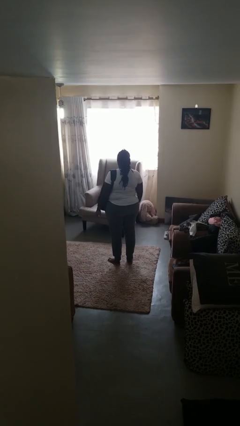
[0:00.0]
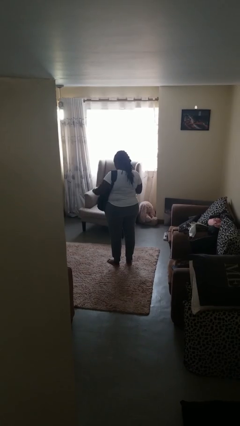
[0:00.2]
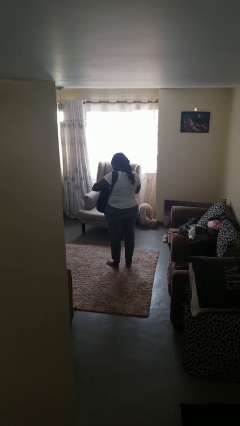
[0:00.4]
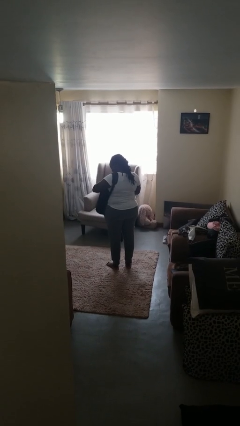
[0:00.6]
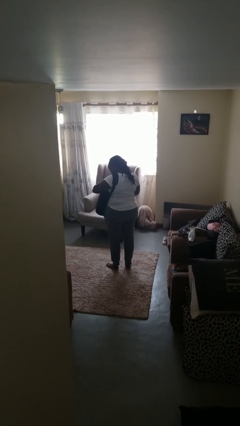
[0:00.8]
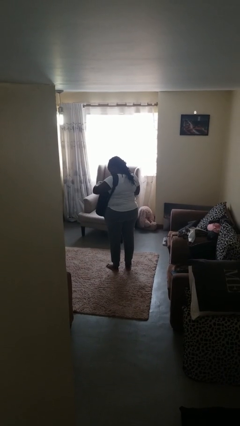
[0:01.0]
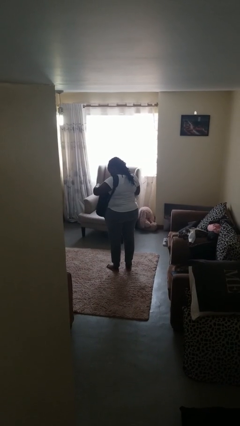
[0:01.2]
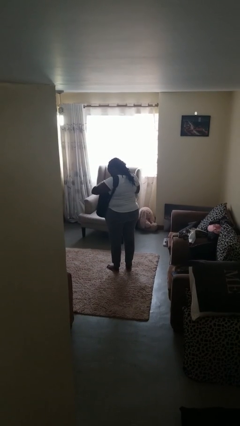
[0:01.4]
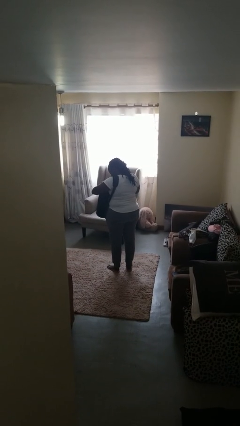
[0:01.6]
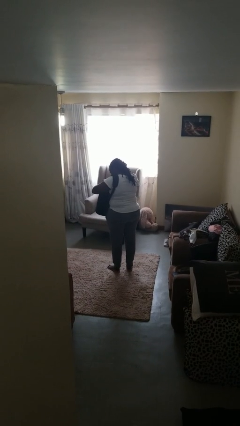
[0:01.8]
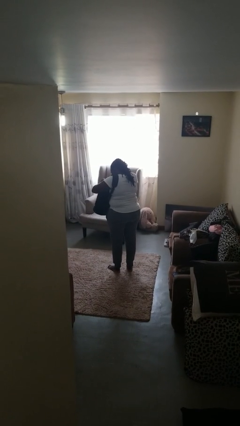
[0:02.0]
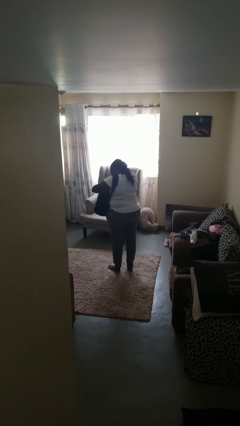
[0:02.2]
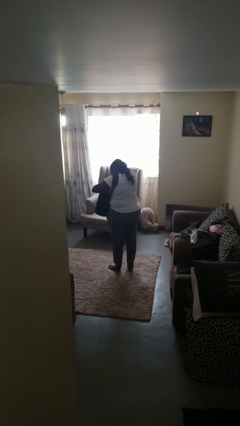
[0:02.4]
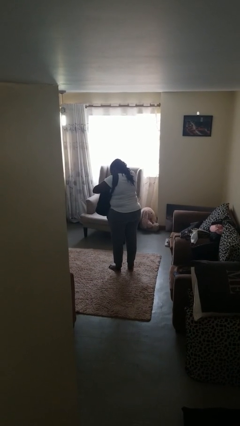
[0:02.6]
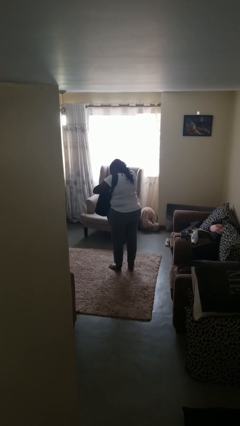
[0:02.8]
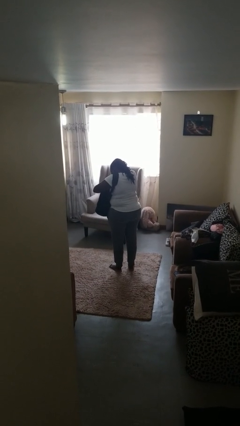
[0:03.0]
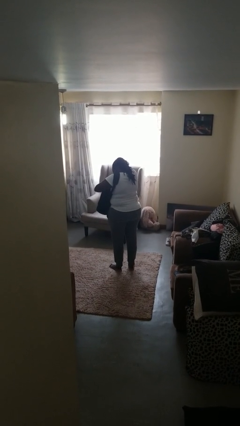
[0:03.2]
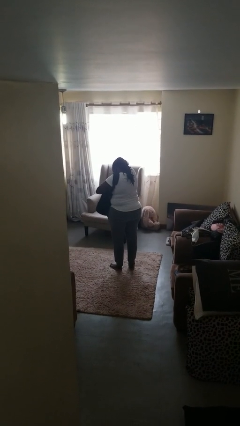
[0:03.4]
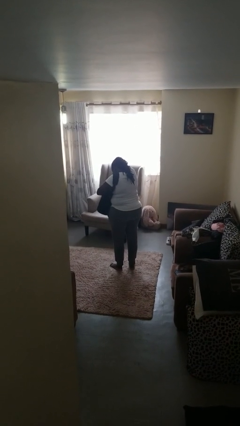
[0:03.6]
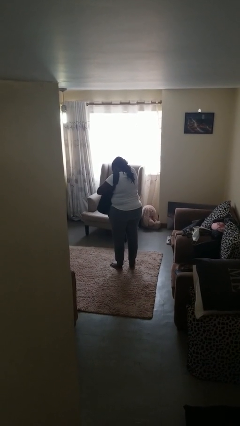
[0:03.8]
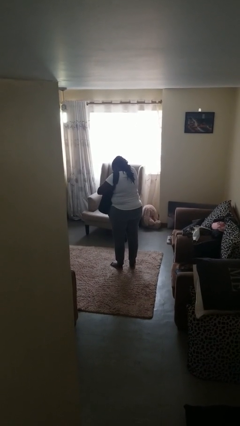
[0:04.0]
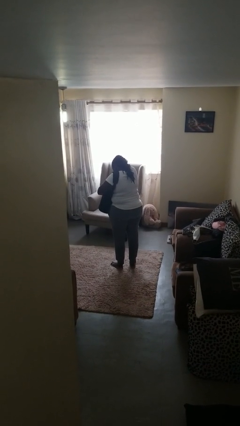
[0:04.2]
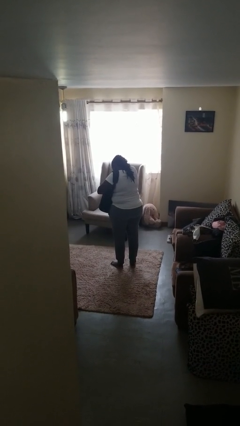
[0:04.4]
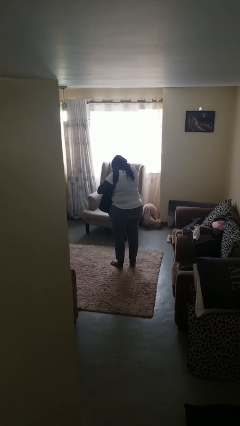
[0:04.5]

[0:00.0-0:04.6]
person searches in backpack

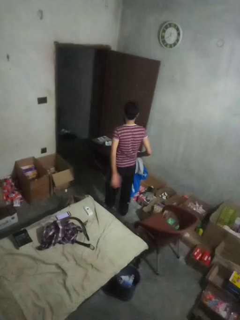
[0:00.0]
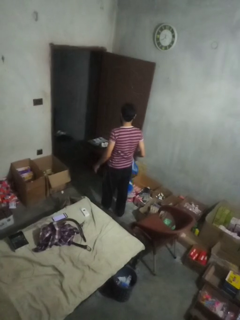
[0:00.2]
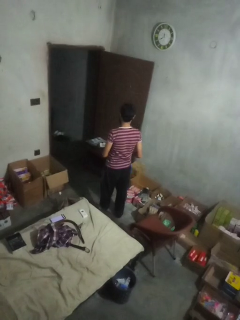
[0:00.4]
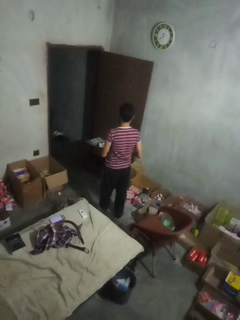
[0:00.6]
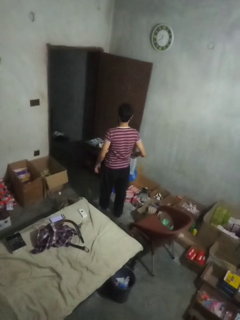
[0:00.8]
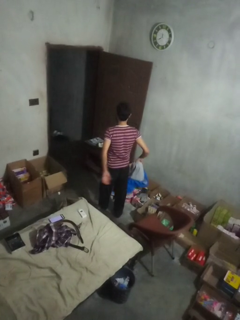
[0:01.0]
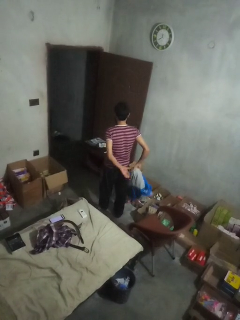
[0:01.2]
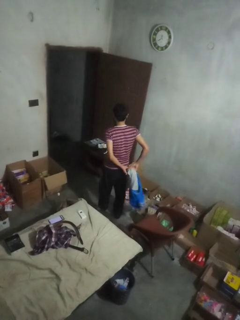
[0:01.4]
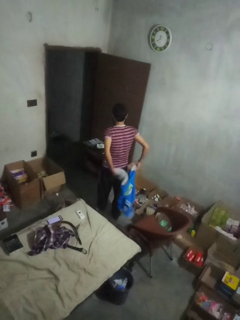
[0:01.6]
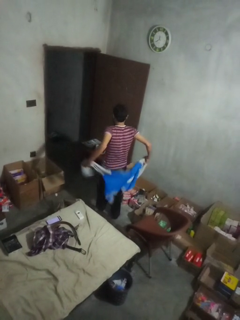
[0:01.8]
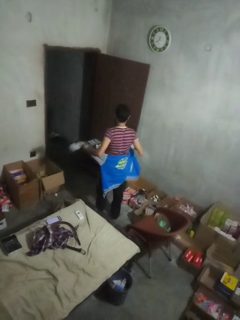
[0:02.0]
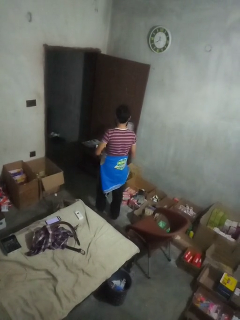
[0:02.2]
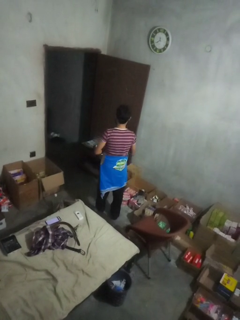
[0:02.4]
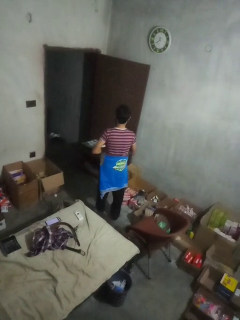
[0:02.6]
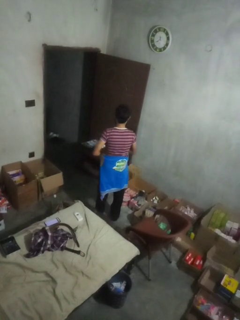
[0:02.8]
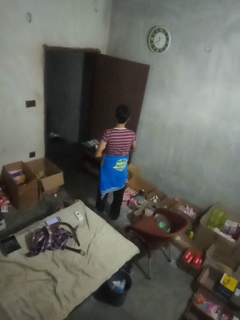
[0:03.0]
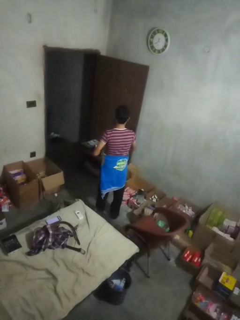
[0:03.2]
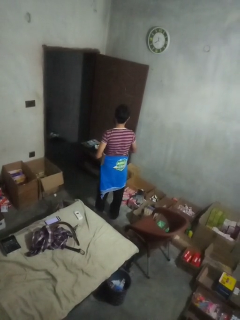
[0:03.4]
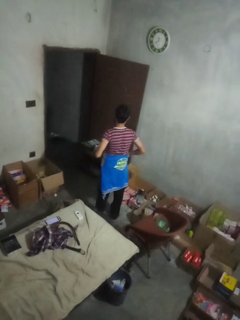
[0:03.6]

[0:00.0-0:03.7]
person ties jacket around waist

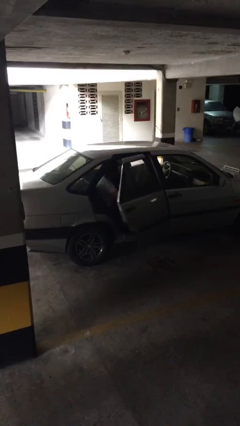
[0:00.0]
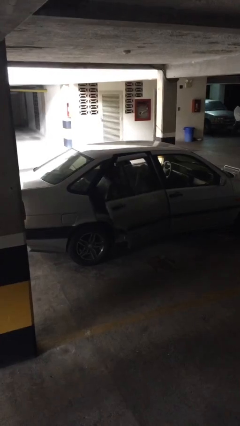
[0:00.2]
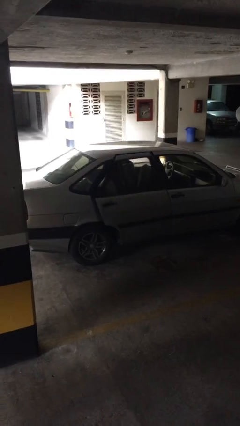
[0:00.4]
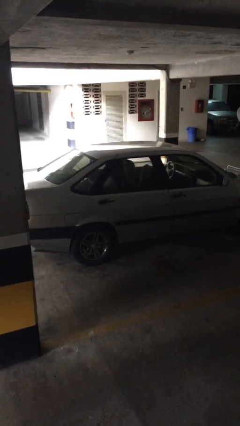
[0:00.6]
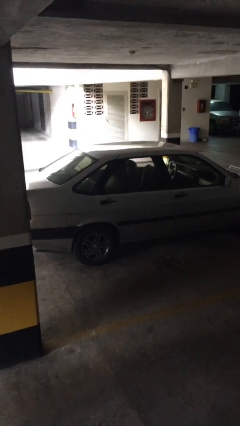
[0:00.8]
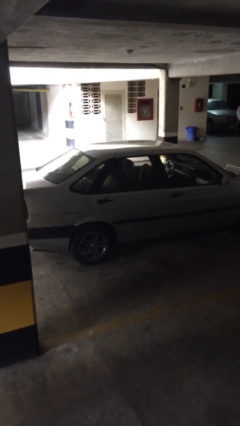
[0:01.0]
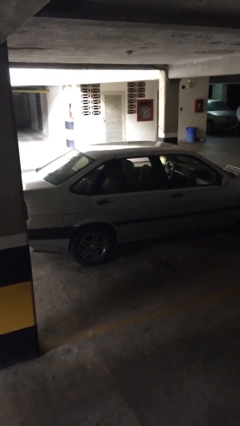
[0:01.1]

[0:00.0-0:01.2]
person closes car door

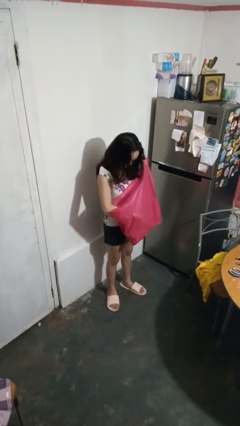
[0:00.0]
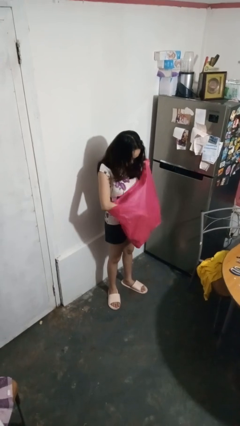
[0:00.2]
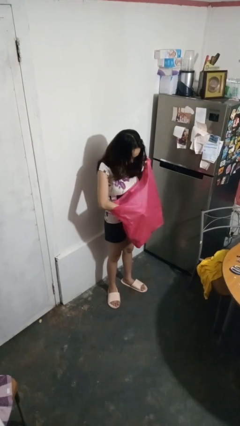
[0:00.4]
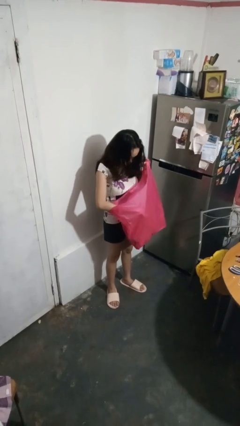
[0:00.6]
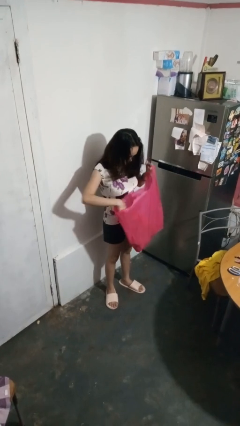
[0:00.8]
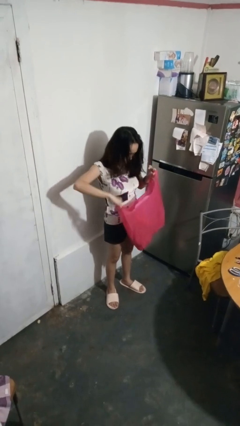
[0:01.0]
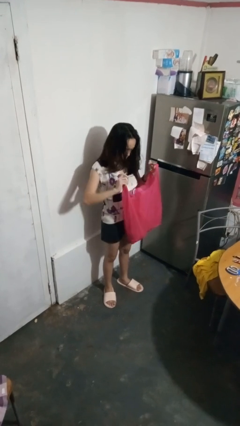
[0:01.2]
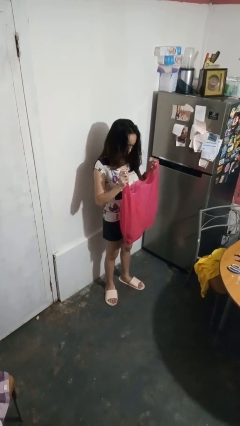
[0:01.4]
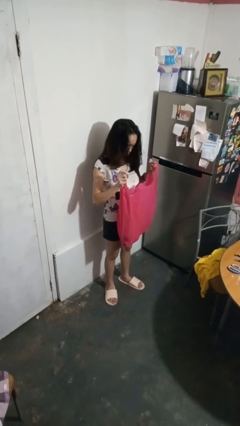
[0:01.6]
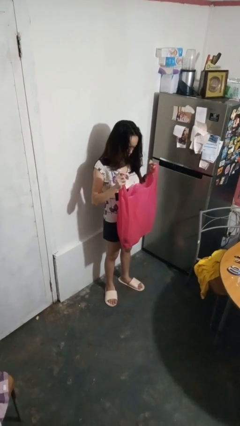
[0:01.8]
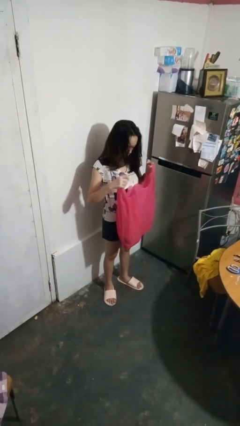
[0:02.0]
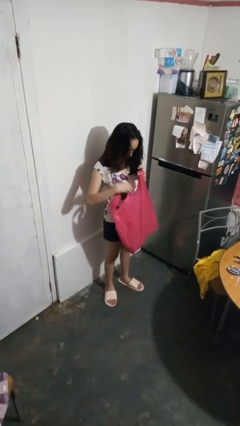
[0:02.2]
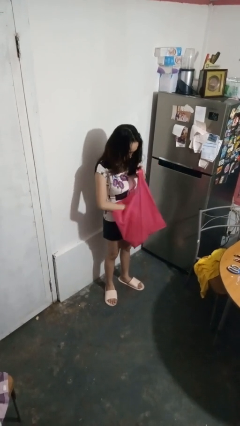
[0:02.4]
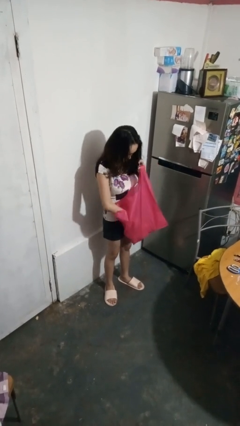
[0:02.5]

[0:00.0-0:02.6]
person searches in box

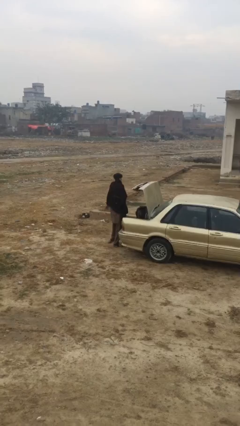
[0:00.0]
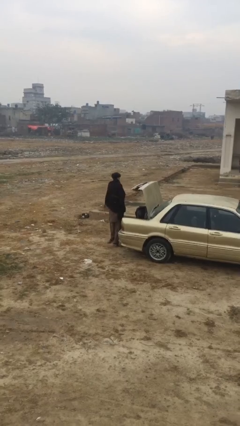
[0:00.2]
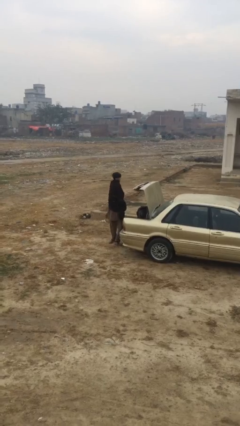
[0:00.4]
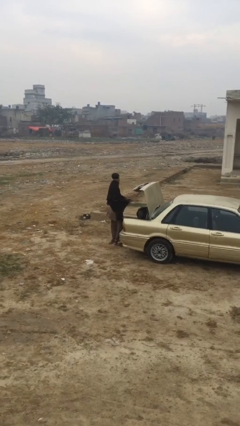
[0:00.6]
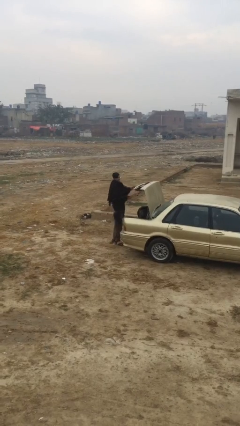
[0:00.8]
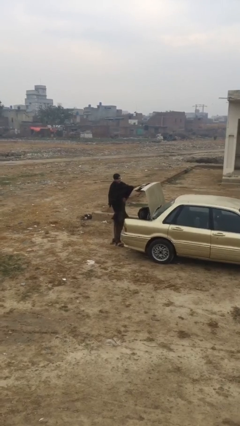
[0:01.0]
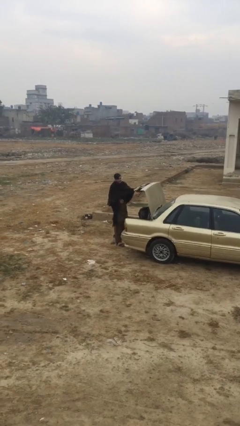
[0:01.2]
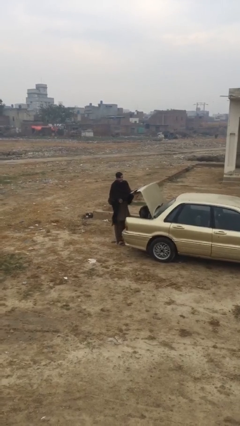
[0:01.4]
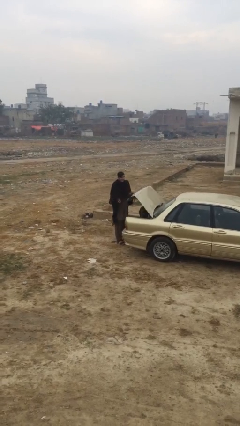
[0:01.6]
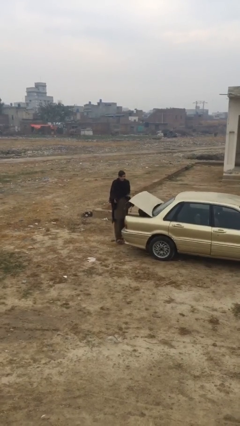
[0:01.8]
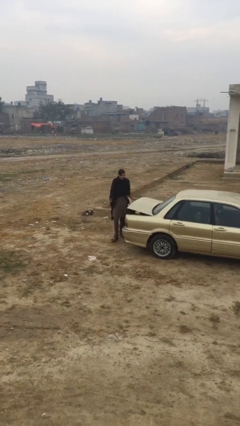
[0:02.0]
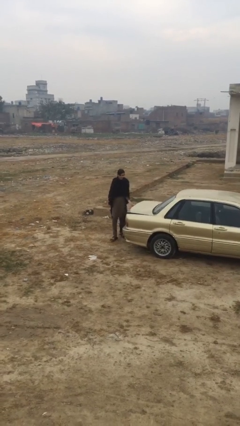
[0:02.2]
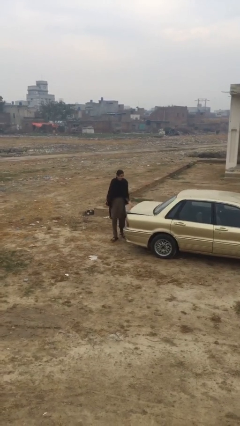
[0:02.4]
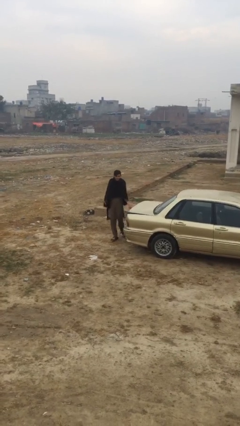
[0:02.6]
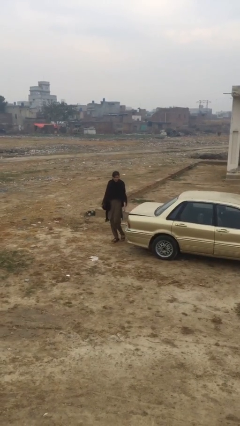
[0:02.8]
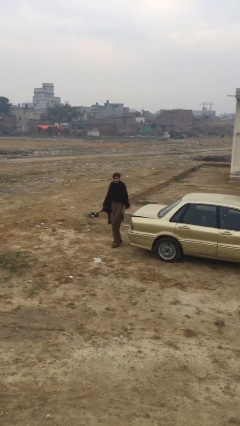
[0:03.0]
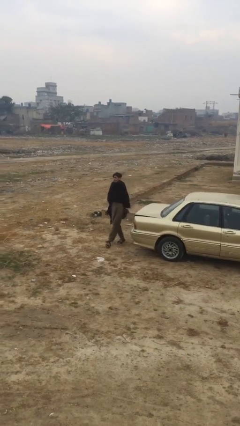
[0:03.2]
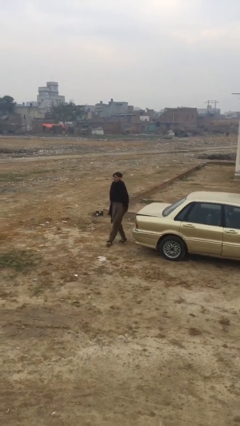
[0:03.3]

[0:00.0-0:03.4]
person closes car trunk

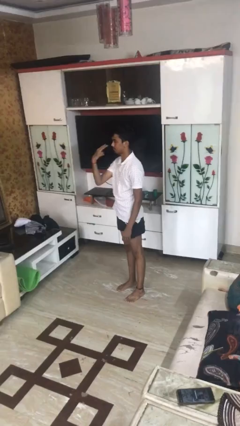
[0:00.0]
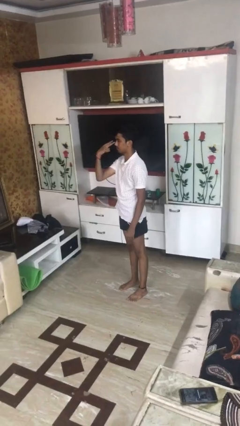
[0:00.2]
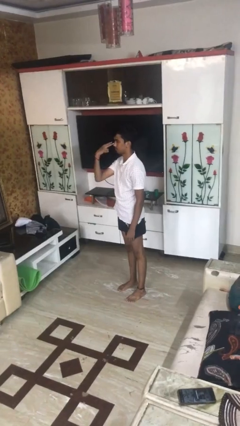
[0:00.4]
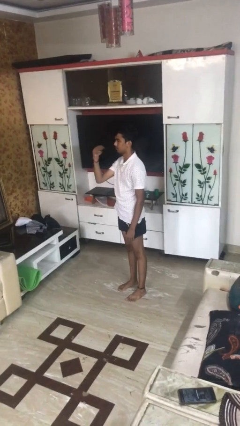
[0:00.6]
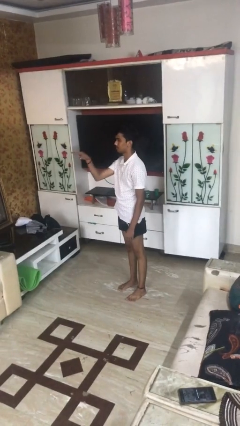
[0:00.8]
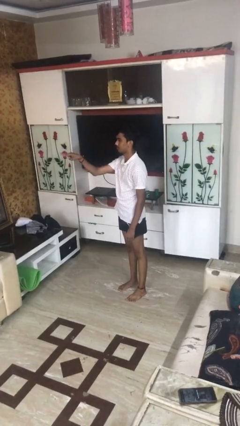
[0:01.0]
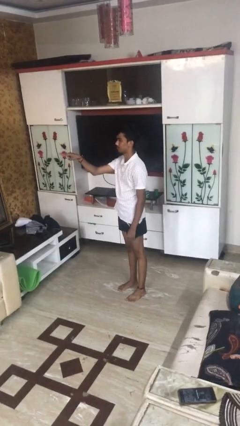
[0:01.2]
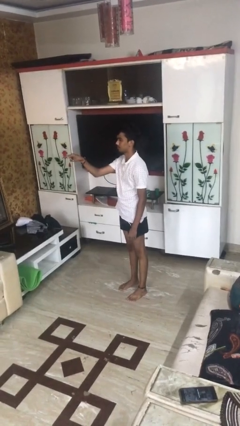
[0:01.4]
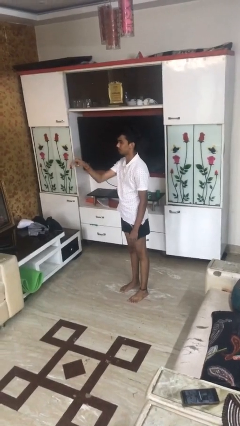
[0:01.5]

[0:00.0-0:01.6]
person gestures watch closely

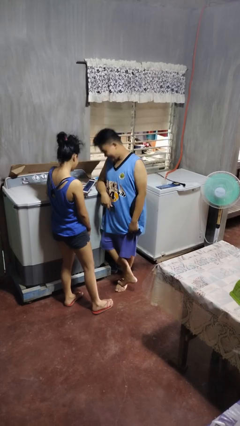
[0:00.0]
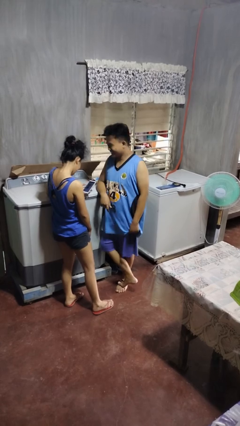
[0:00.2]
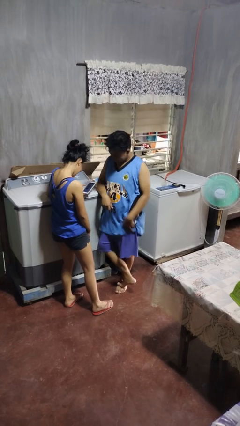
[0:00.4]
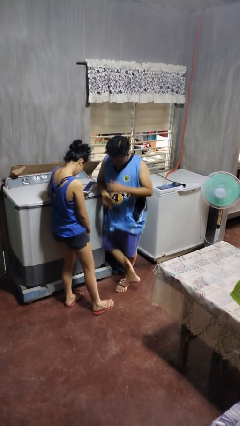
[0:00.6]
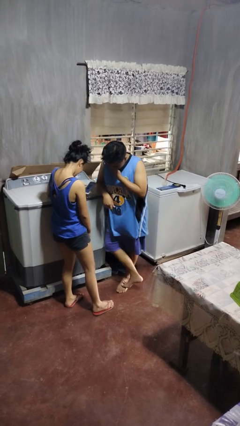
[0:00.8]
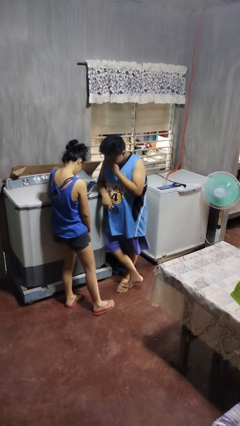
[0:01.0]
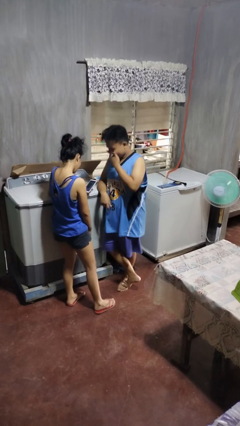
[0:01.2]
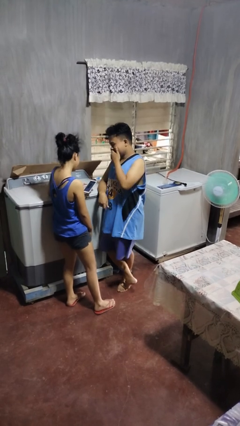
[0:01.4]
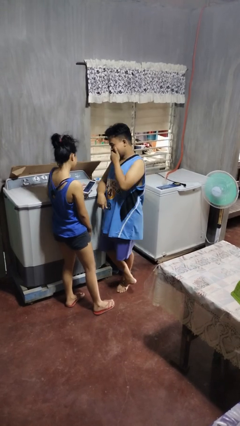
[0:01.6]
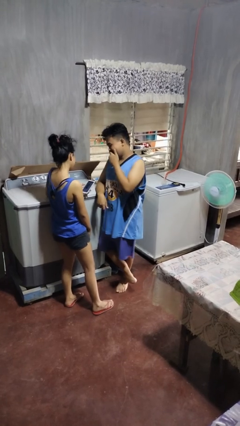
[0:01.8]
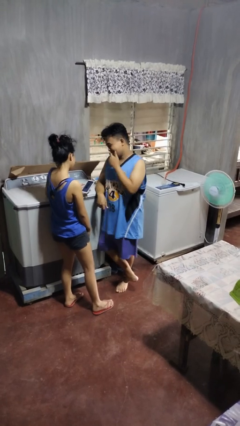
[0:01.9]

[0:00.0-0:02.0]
person laughs with person
